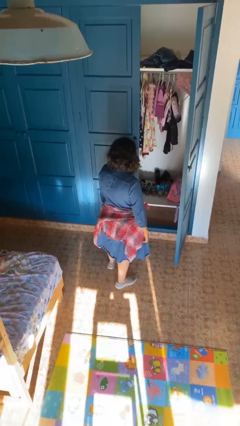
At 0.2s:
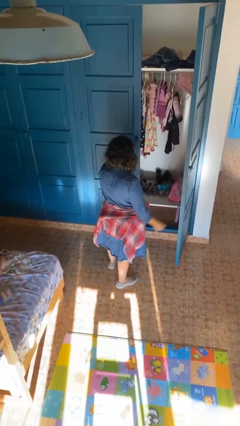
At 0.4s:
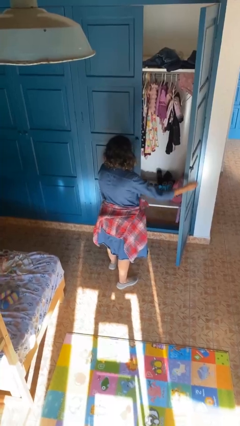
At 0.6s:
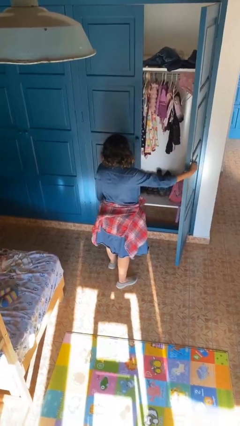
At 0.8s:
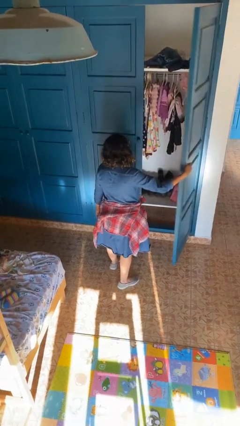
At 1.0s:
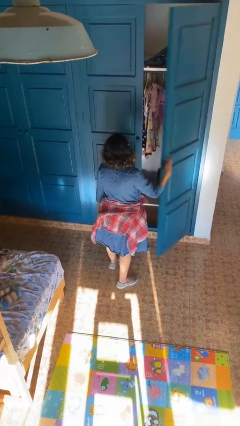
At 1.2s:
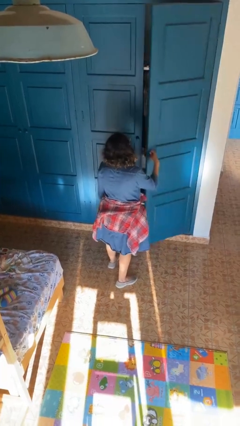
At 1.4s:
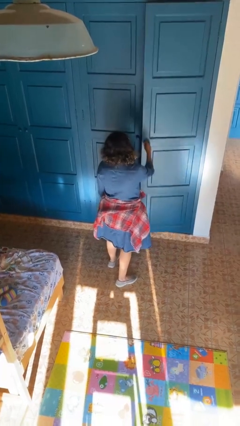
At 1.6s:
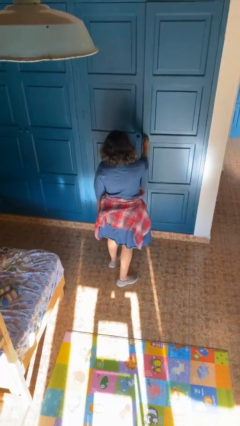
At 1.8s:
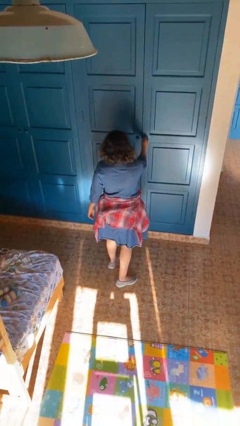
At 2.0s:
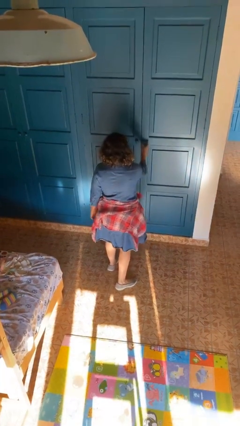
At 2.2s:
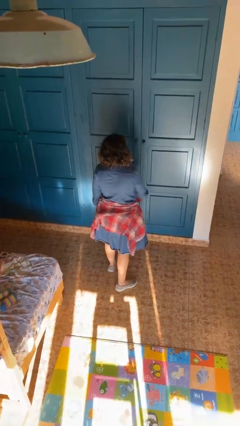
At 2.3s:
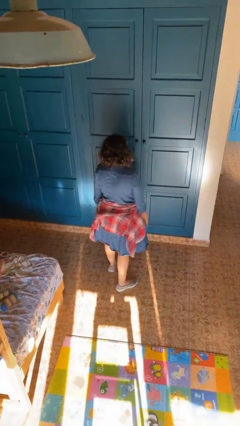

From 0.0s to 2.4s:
person closes closet door

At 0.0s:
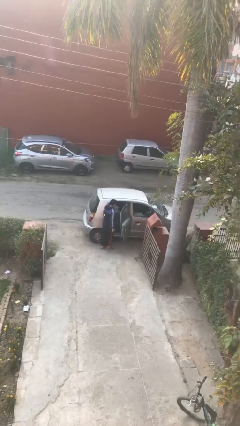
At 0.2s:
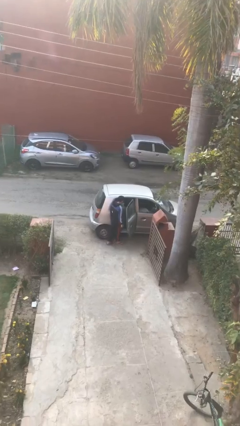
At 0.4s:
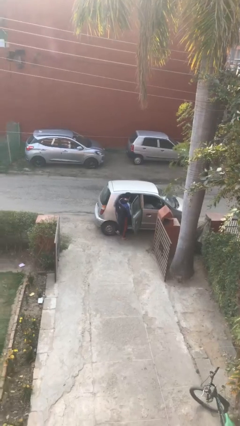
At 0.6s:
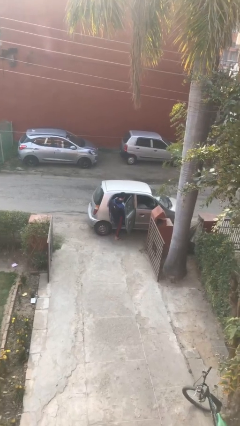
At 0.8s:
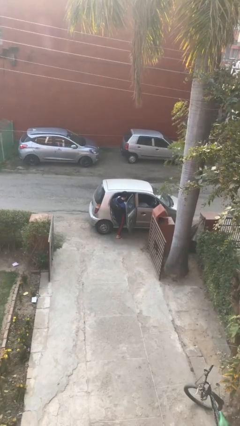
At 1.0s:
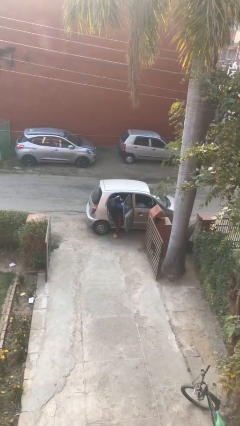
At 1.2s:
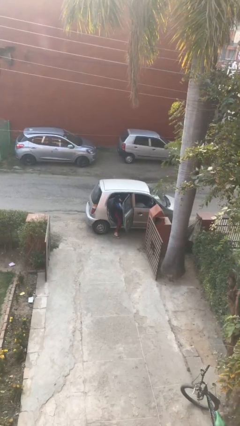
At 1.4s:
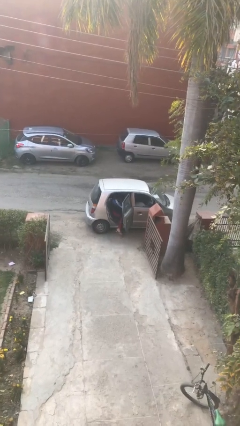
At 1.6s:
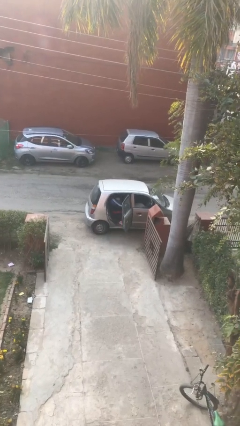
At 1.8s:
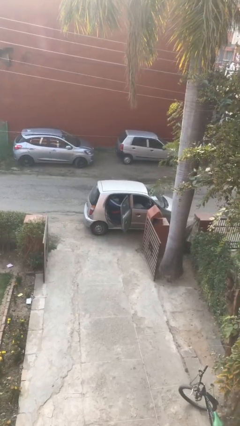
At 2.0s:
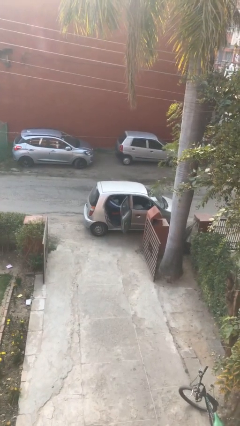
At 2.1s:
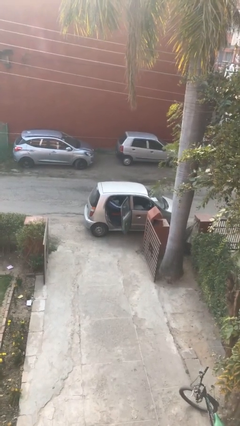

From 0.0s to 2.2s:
person enters car

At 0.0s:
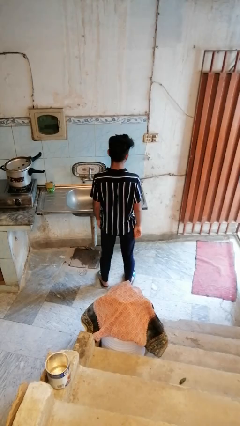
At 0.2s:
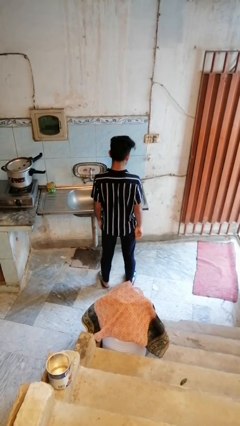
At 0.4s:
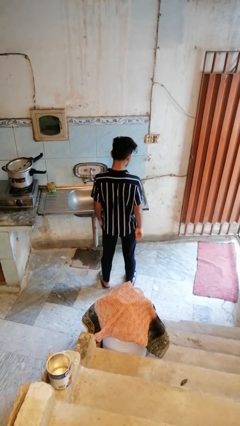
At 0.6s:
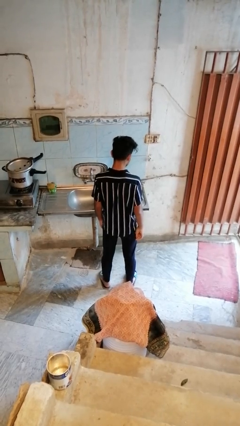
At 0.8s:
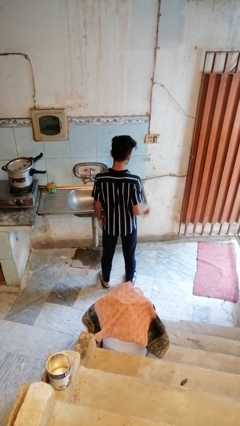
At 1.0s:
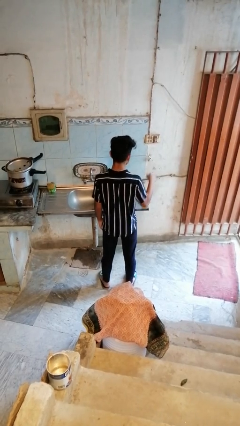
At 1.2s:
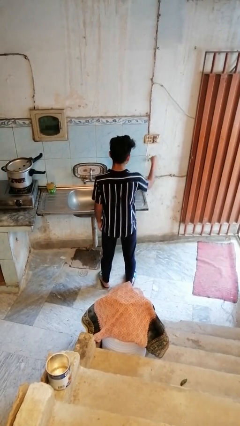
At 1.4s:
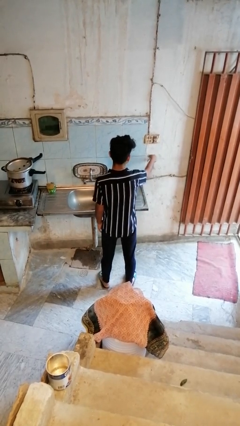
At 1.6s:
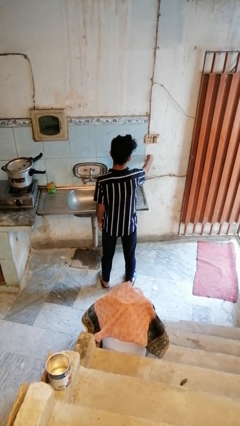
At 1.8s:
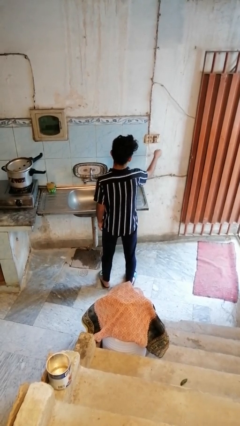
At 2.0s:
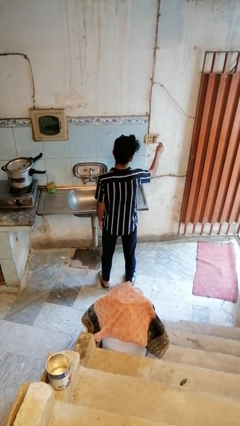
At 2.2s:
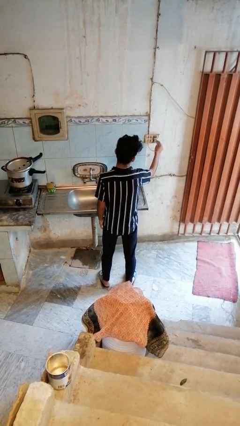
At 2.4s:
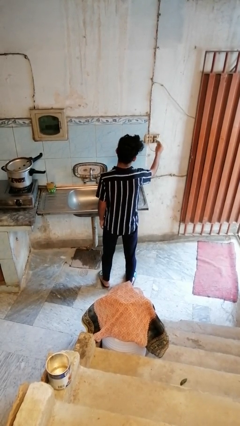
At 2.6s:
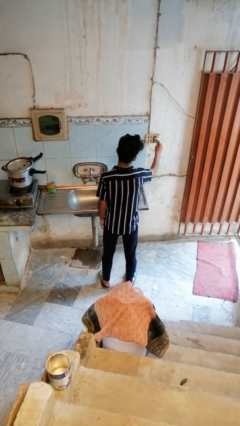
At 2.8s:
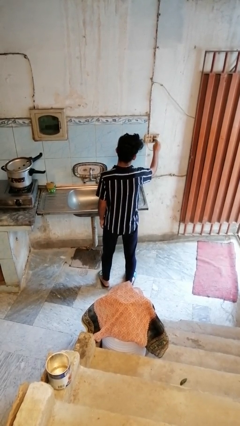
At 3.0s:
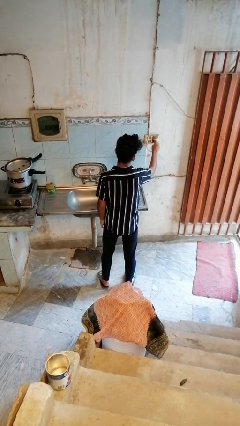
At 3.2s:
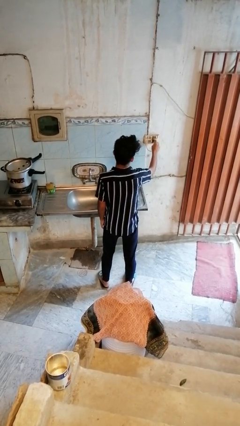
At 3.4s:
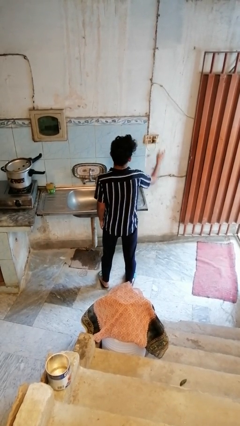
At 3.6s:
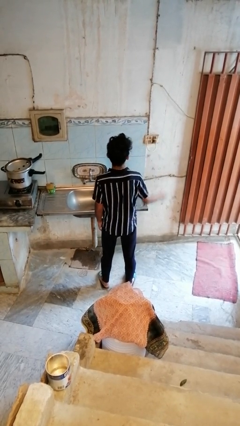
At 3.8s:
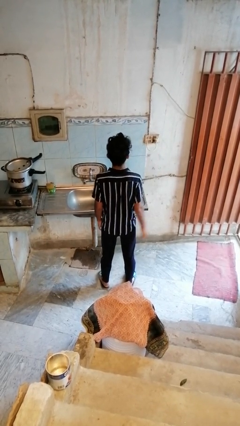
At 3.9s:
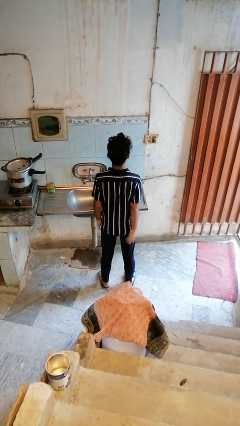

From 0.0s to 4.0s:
person plugs into electrical socket

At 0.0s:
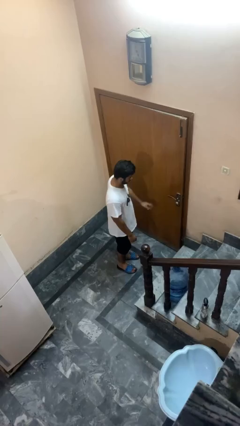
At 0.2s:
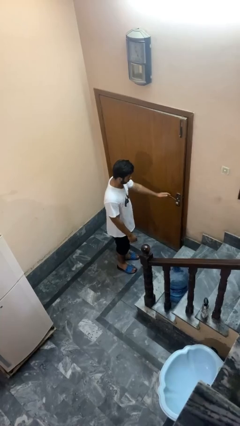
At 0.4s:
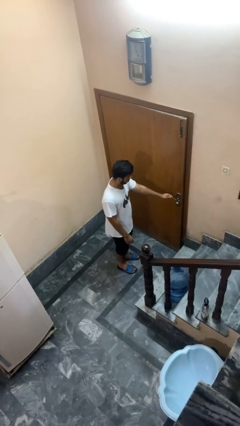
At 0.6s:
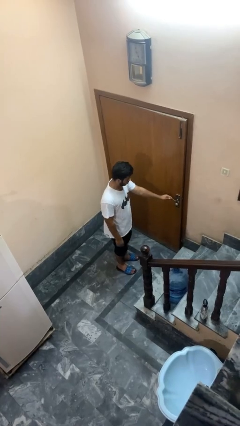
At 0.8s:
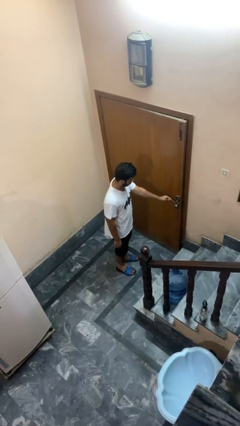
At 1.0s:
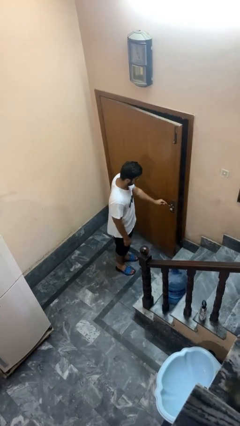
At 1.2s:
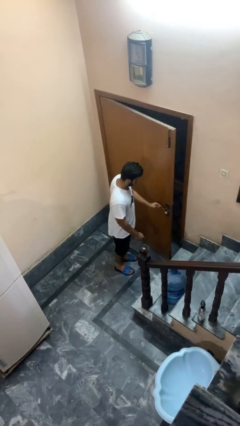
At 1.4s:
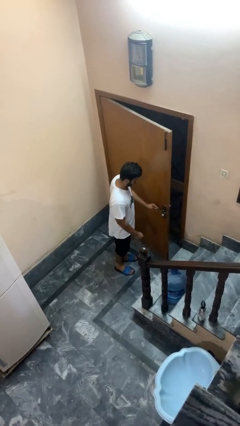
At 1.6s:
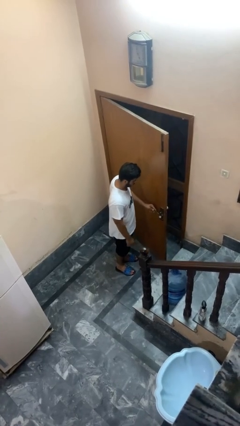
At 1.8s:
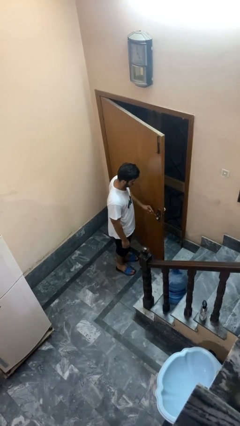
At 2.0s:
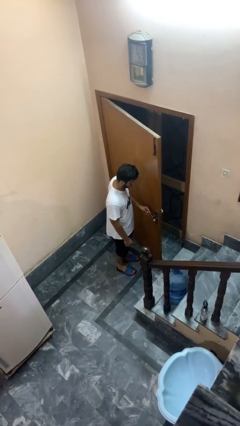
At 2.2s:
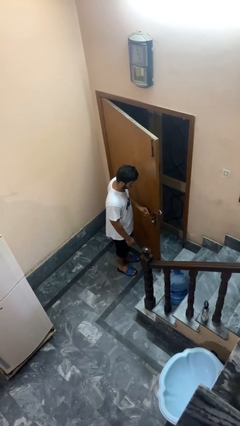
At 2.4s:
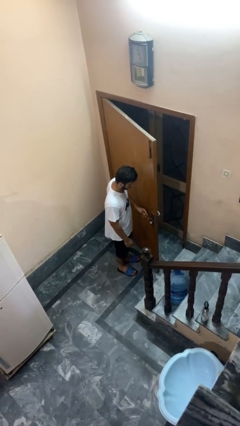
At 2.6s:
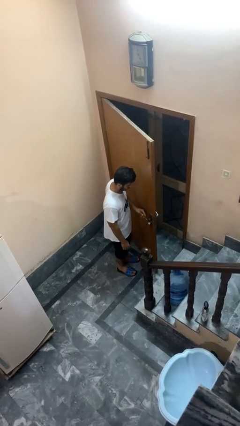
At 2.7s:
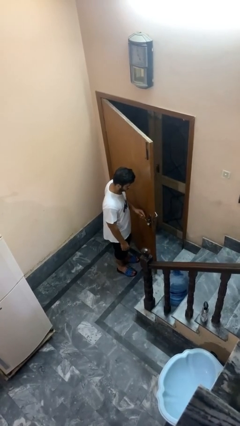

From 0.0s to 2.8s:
person opens facility door

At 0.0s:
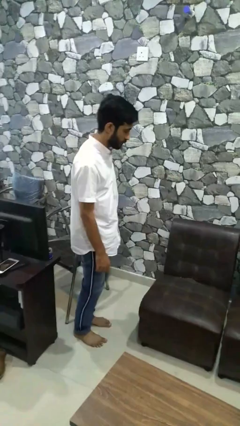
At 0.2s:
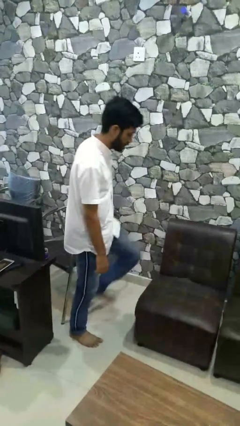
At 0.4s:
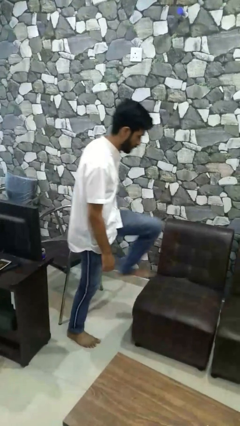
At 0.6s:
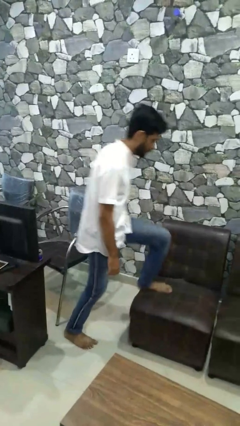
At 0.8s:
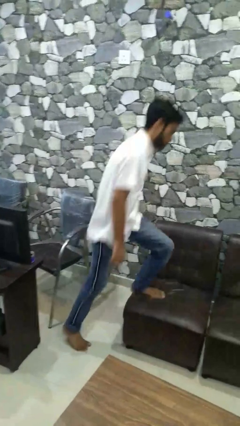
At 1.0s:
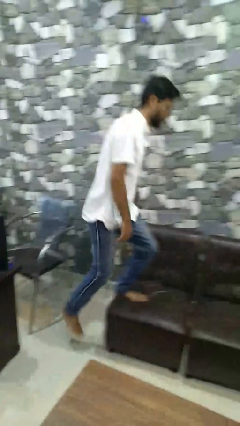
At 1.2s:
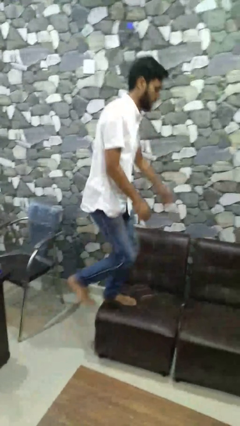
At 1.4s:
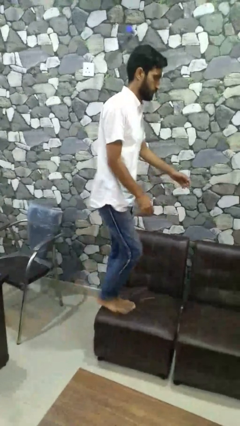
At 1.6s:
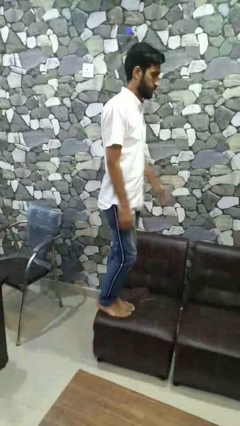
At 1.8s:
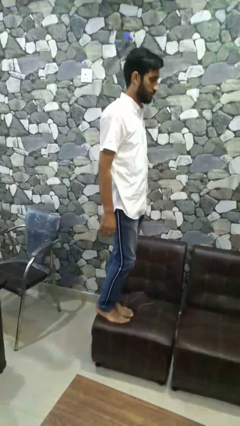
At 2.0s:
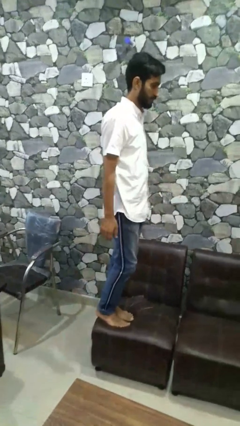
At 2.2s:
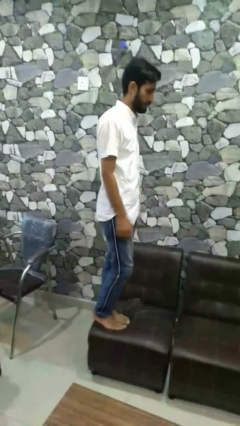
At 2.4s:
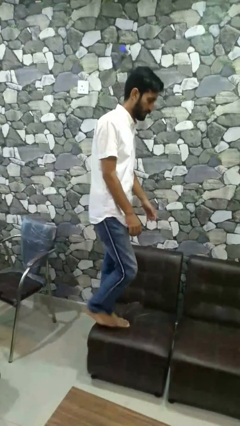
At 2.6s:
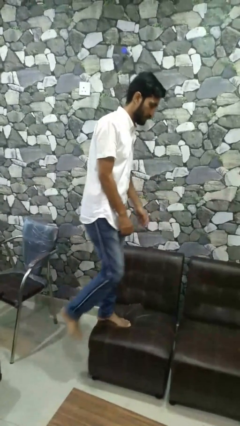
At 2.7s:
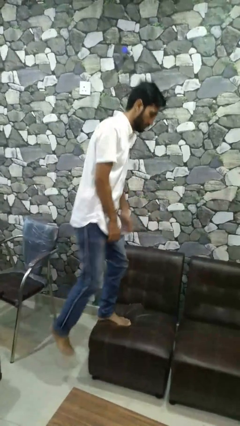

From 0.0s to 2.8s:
person jumps on couch

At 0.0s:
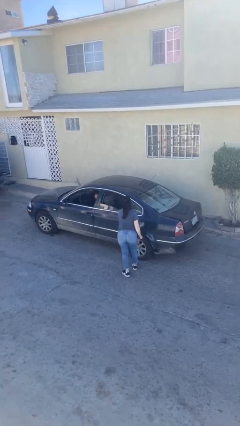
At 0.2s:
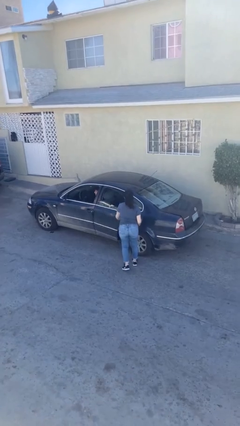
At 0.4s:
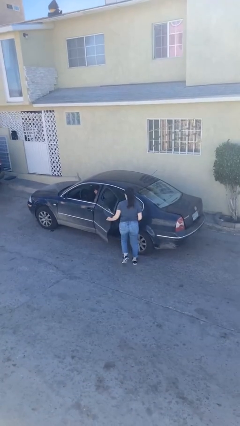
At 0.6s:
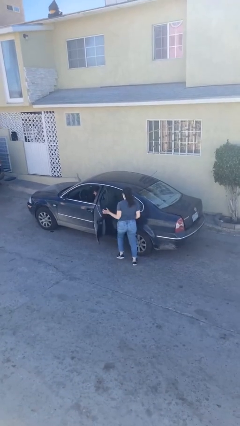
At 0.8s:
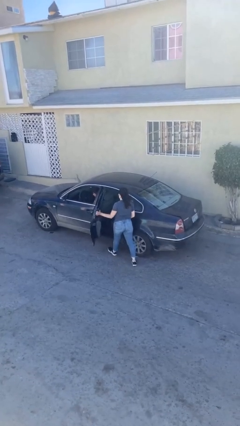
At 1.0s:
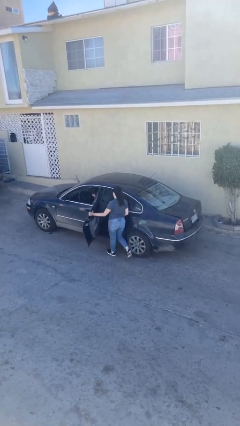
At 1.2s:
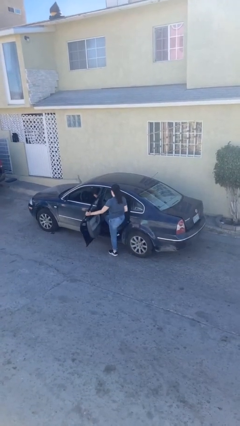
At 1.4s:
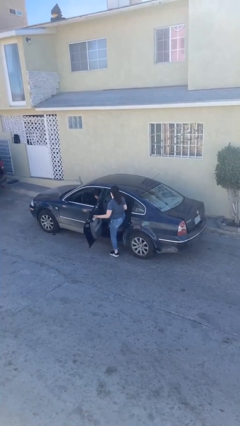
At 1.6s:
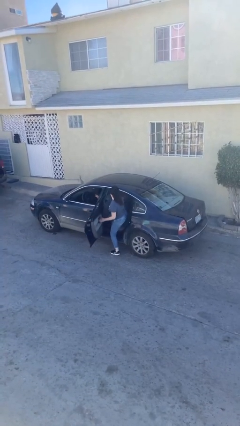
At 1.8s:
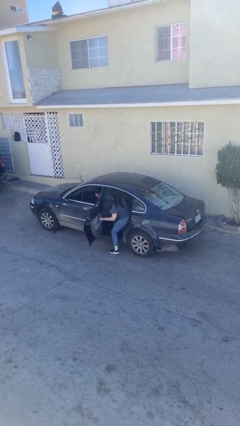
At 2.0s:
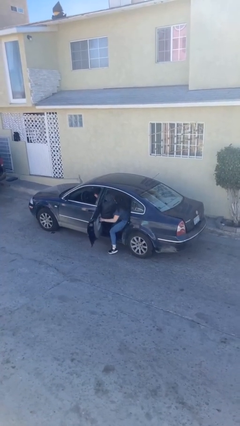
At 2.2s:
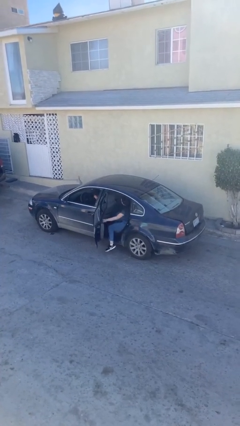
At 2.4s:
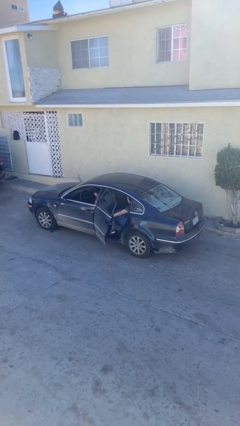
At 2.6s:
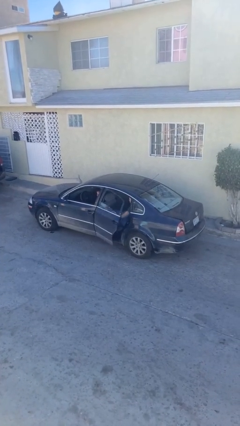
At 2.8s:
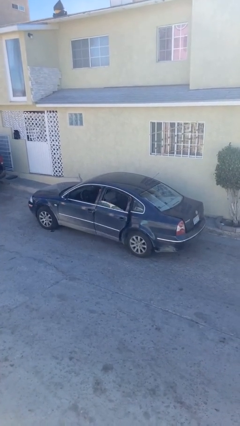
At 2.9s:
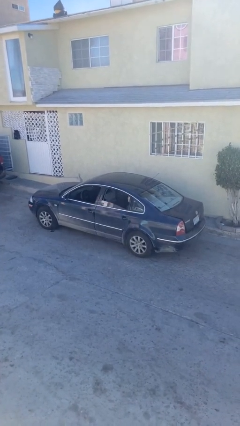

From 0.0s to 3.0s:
car picks up person
